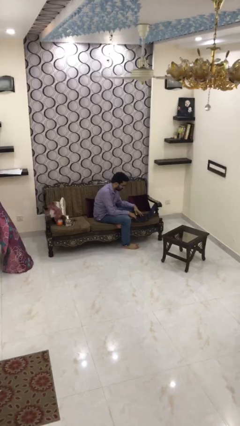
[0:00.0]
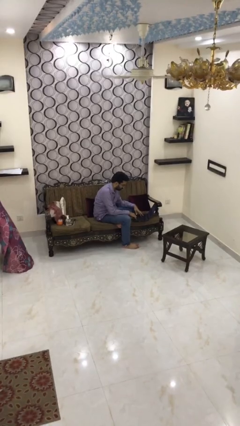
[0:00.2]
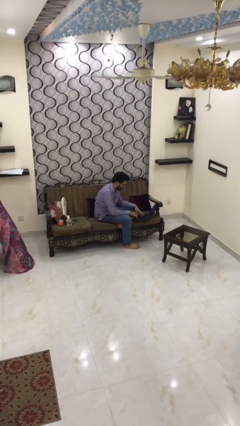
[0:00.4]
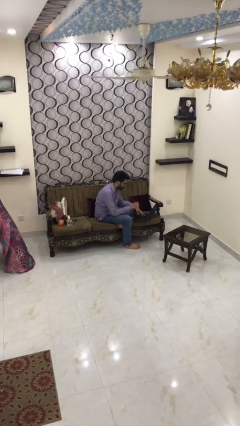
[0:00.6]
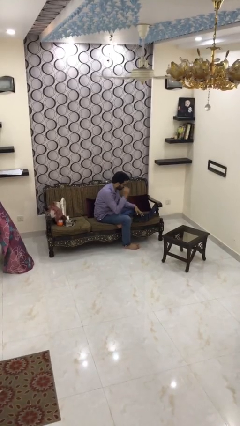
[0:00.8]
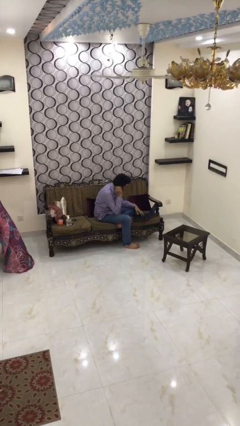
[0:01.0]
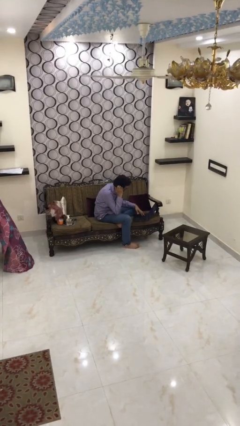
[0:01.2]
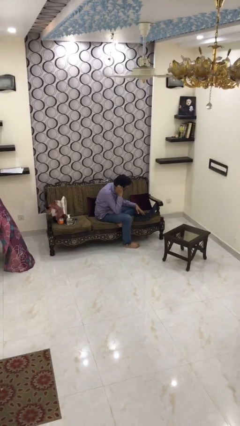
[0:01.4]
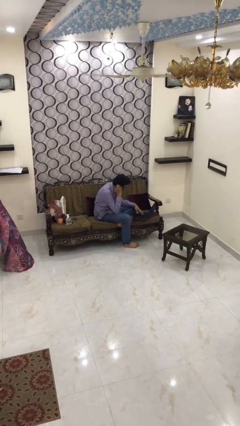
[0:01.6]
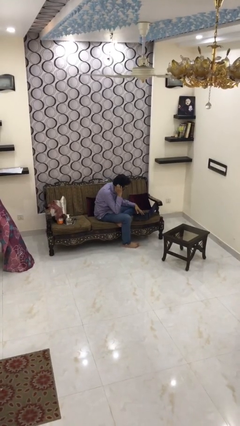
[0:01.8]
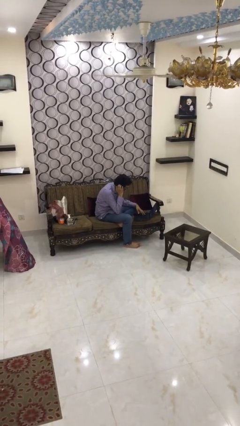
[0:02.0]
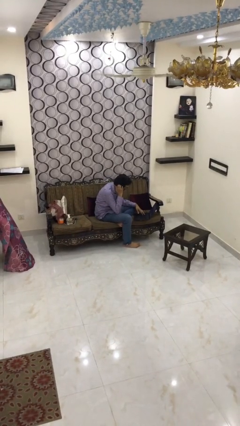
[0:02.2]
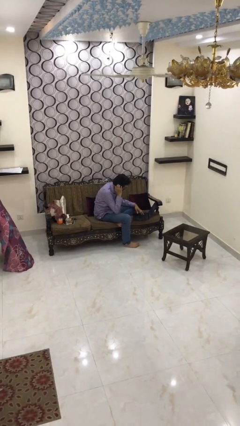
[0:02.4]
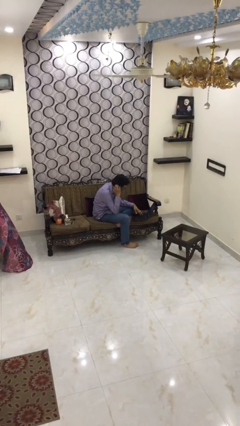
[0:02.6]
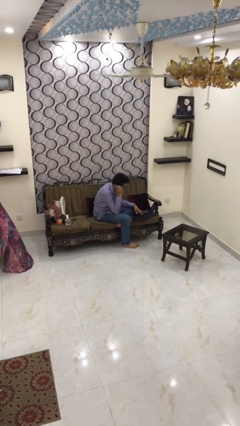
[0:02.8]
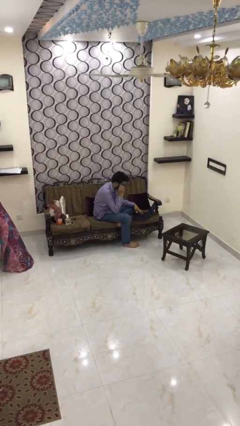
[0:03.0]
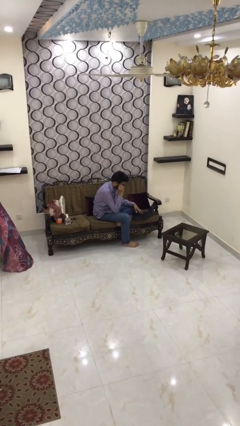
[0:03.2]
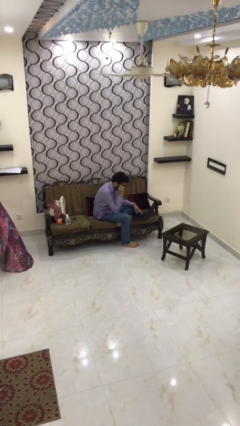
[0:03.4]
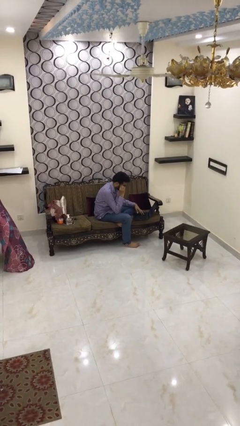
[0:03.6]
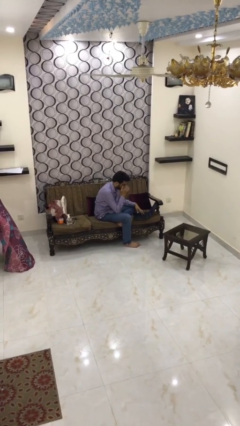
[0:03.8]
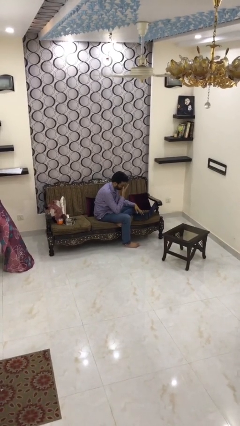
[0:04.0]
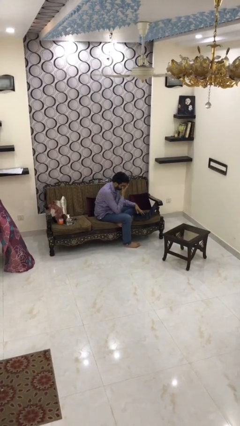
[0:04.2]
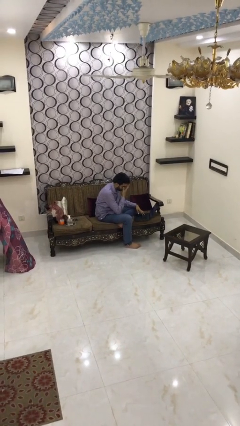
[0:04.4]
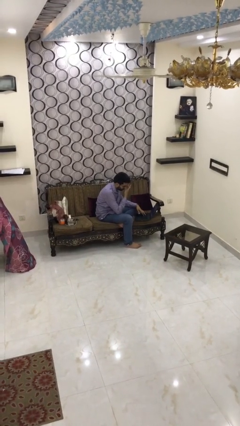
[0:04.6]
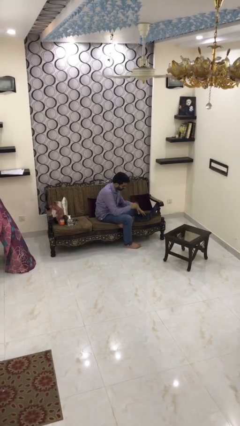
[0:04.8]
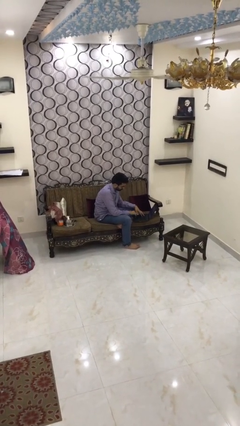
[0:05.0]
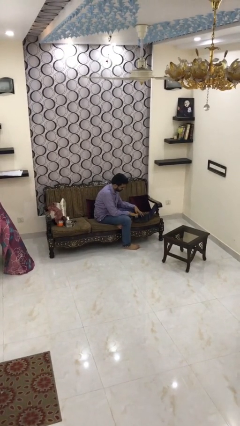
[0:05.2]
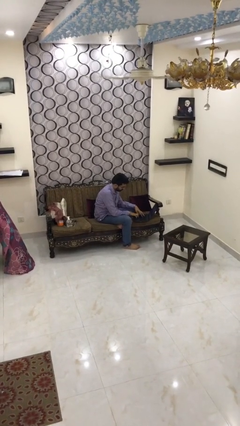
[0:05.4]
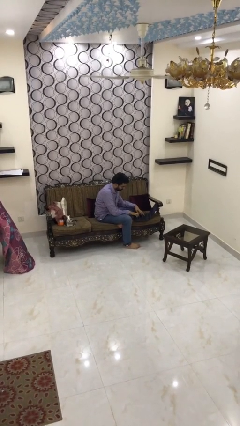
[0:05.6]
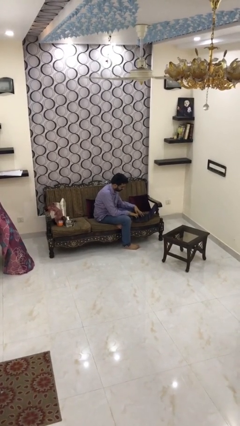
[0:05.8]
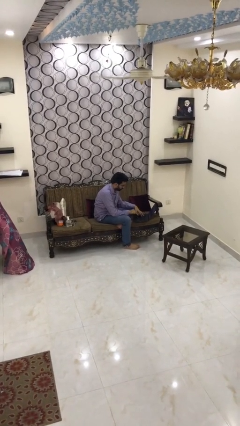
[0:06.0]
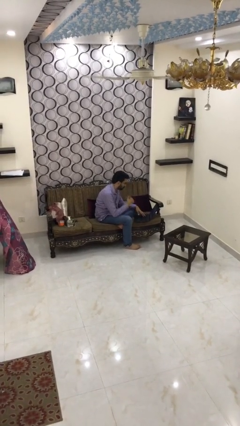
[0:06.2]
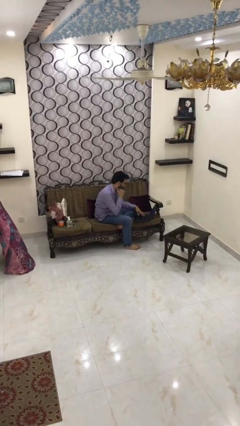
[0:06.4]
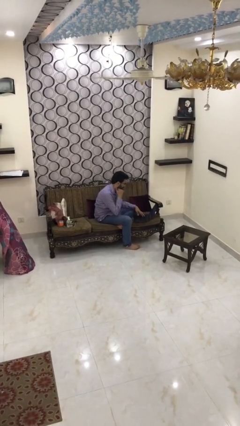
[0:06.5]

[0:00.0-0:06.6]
person interacts with laptop

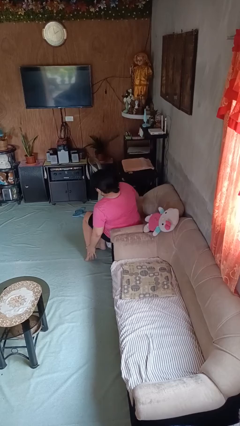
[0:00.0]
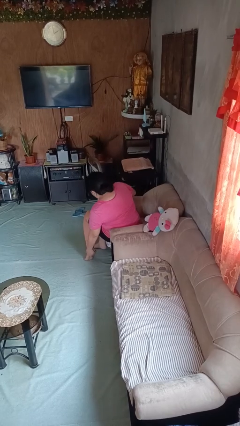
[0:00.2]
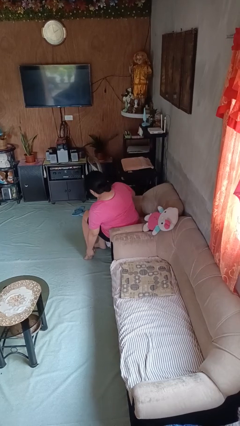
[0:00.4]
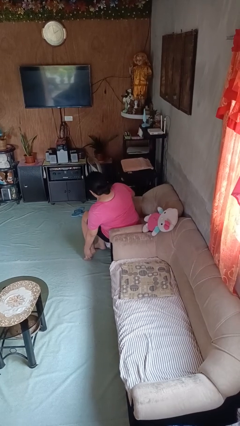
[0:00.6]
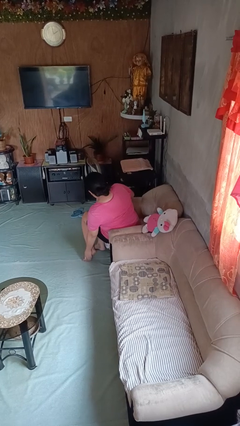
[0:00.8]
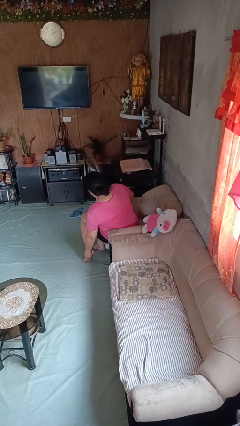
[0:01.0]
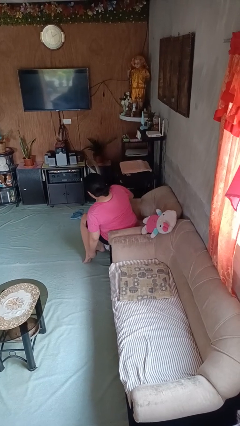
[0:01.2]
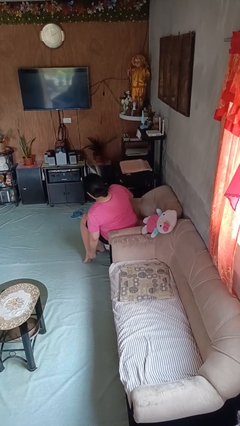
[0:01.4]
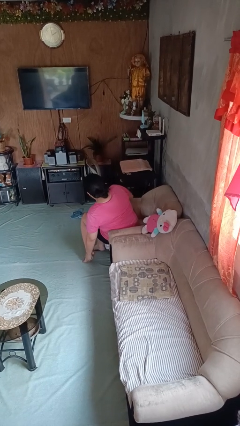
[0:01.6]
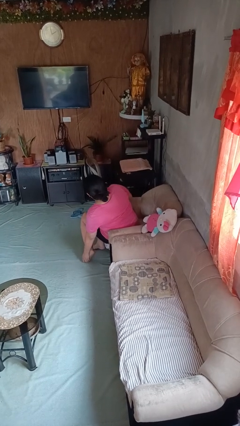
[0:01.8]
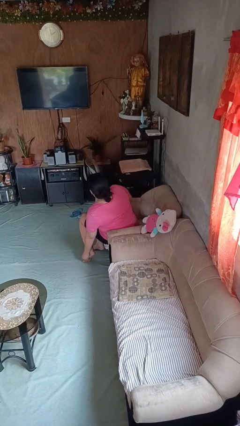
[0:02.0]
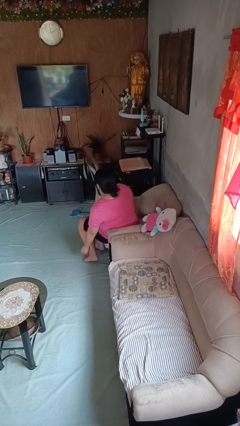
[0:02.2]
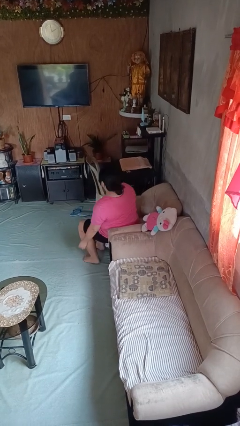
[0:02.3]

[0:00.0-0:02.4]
person rubs foot

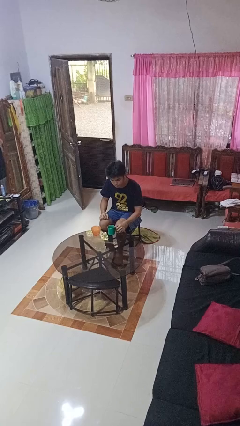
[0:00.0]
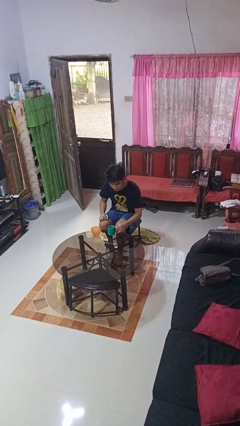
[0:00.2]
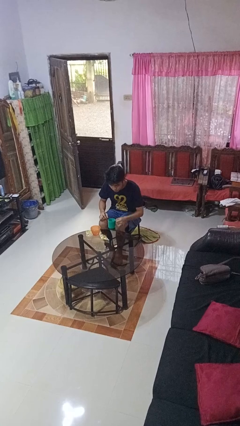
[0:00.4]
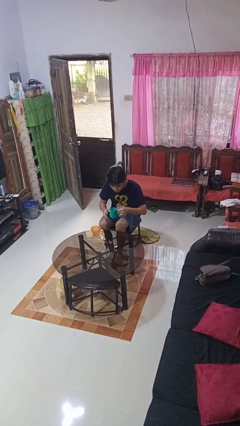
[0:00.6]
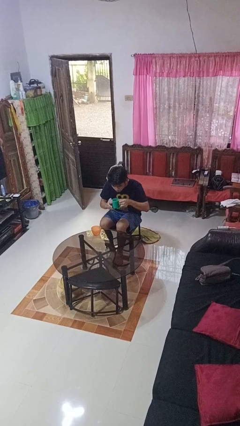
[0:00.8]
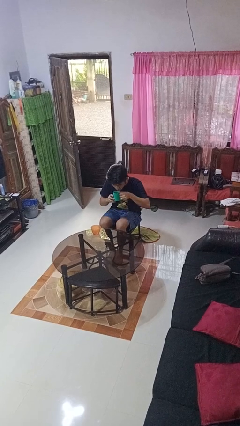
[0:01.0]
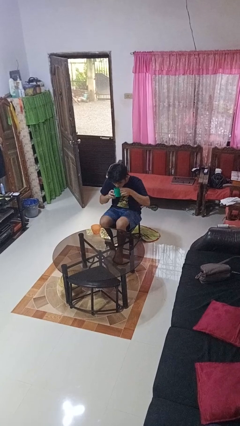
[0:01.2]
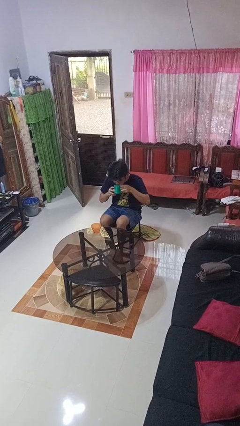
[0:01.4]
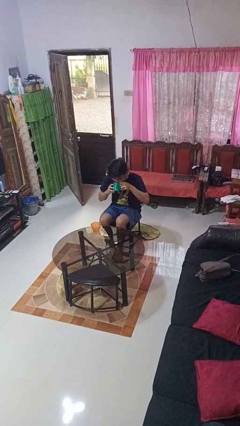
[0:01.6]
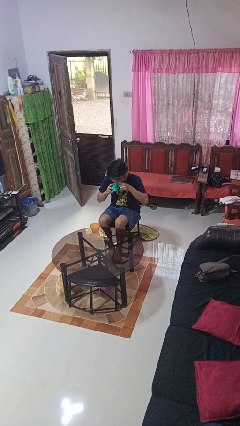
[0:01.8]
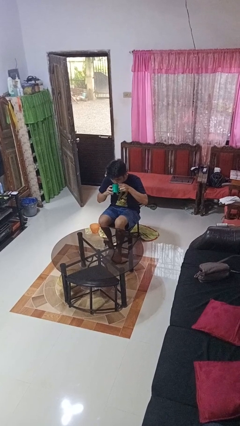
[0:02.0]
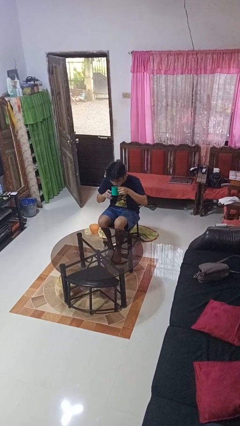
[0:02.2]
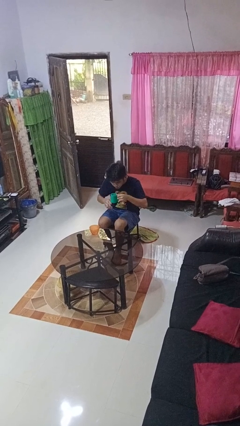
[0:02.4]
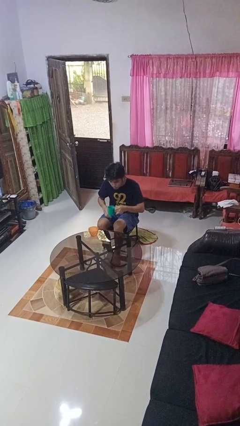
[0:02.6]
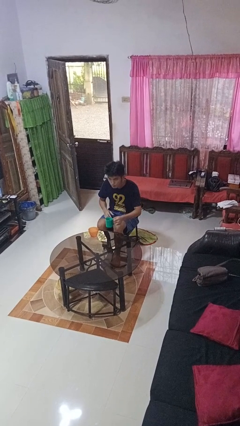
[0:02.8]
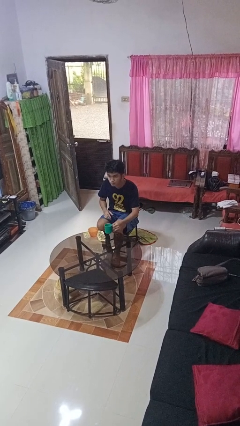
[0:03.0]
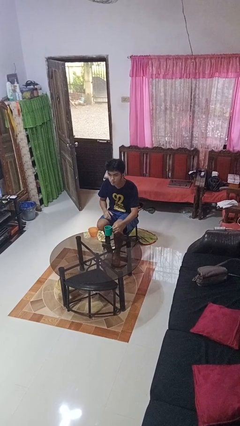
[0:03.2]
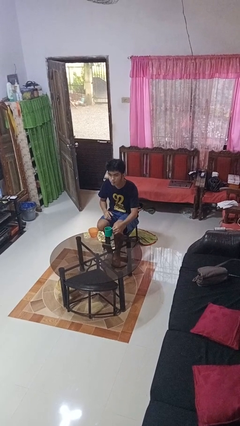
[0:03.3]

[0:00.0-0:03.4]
person drinks from cup

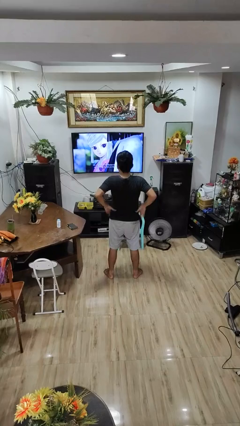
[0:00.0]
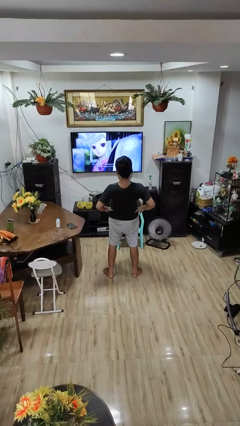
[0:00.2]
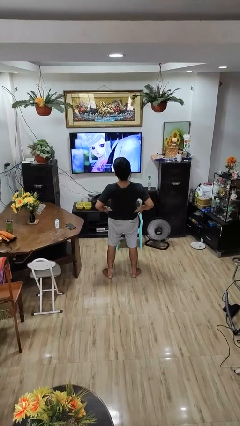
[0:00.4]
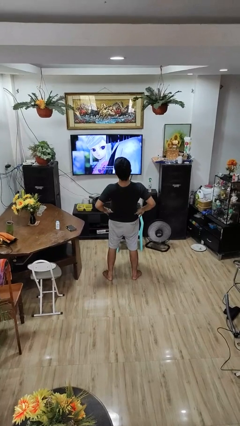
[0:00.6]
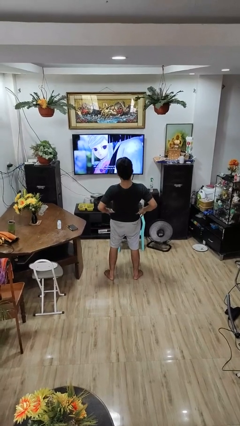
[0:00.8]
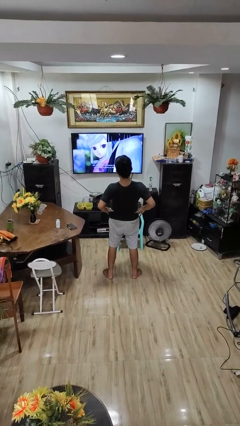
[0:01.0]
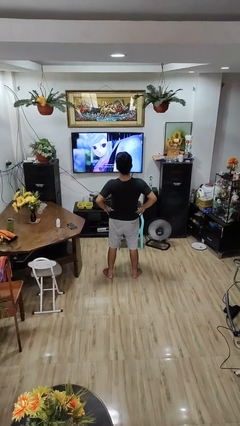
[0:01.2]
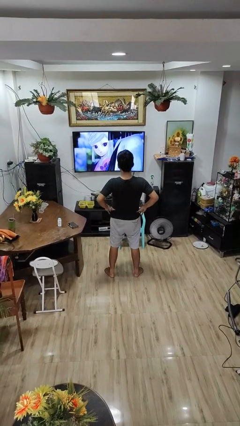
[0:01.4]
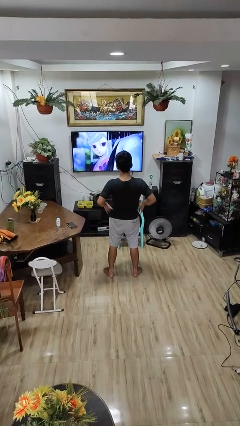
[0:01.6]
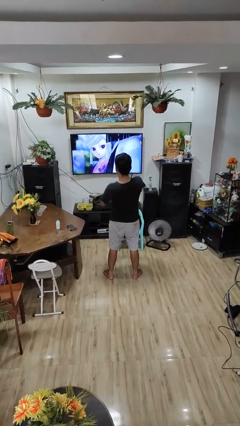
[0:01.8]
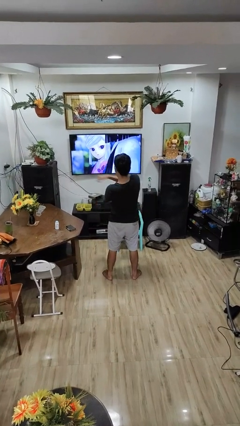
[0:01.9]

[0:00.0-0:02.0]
person stretches back

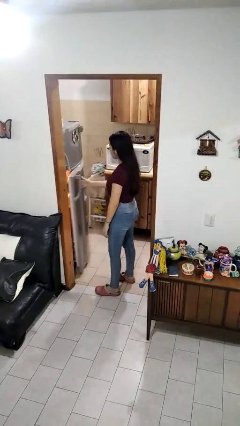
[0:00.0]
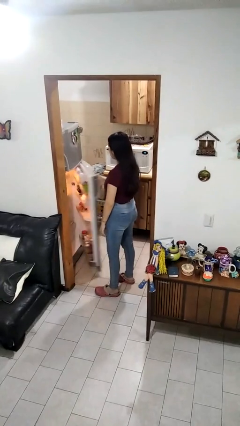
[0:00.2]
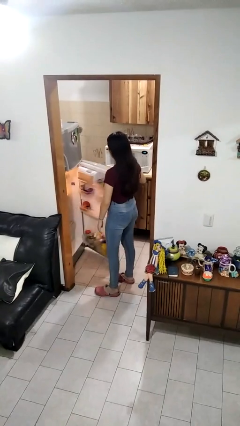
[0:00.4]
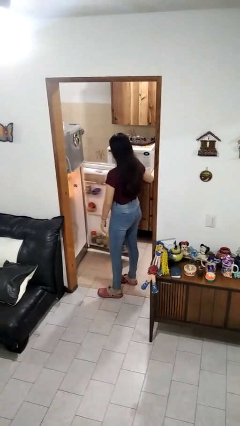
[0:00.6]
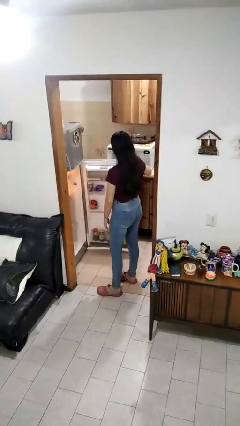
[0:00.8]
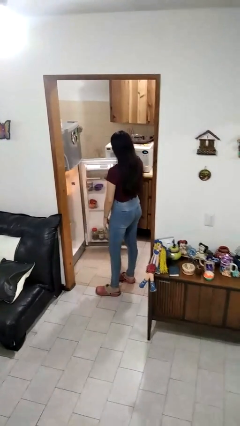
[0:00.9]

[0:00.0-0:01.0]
person opens refrigerator

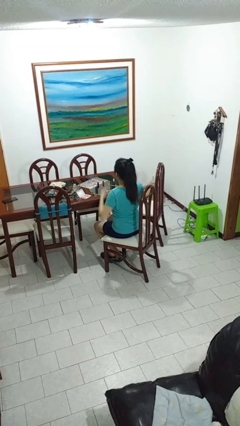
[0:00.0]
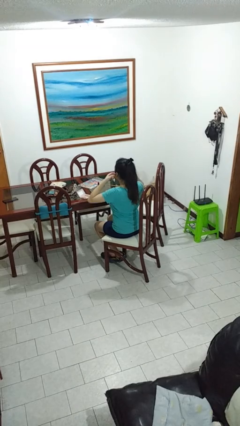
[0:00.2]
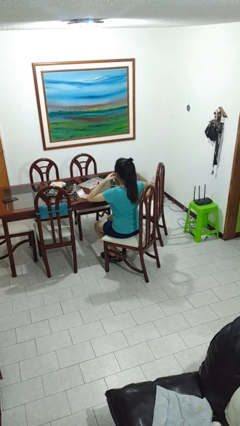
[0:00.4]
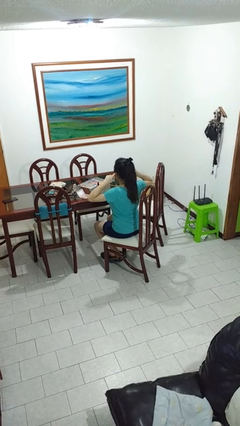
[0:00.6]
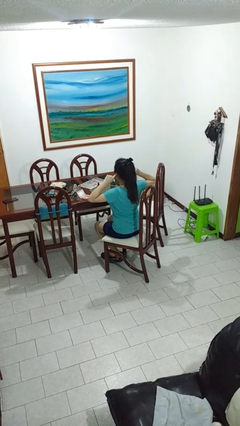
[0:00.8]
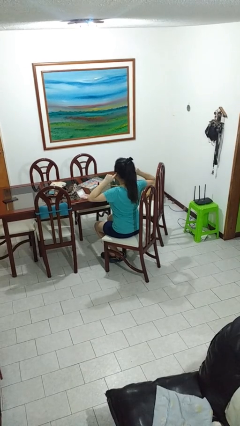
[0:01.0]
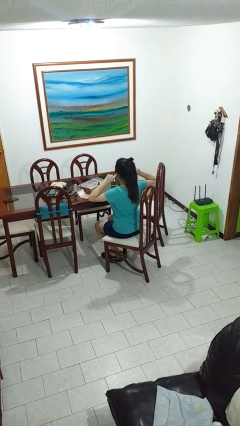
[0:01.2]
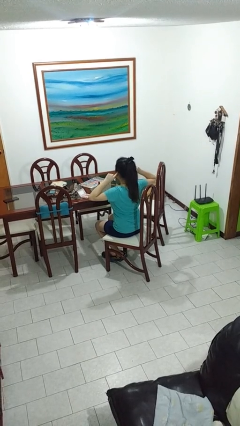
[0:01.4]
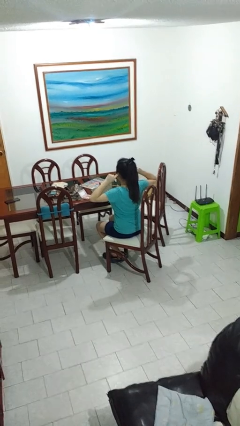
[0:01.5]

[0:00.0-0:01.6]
person puts fingers in ear
